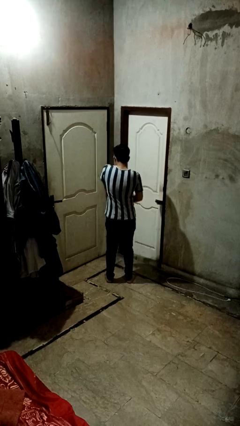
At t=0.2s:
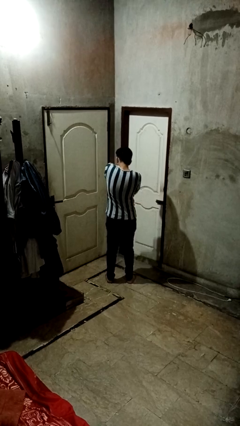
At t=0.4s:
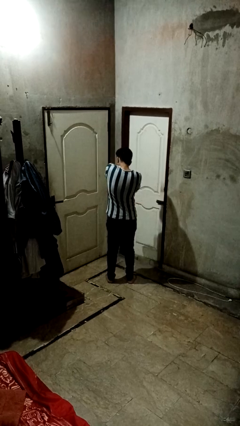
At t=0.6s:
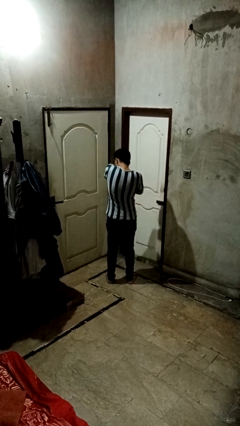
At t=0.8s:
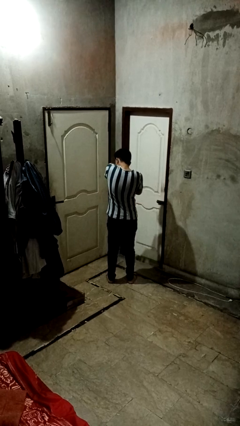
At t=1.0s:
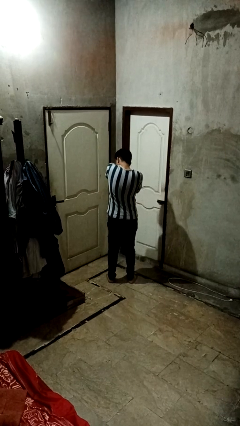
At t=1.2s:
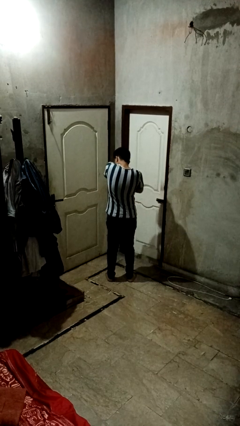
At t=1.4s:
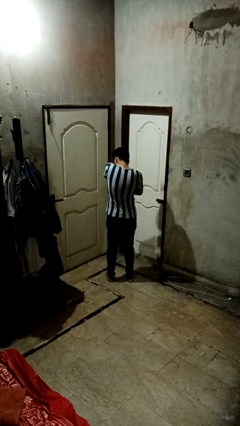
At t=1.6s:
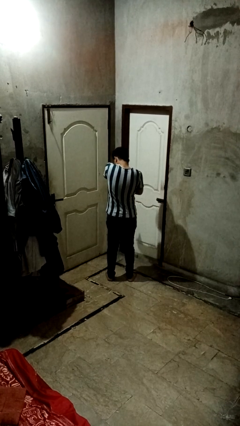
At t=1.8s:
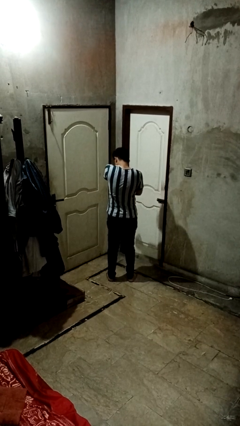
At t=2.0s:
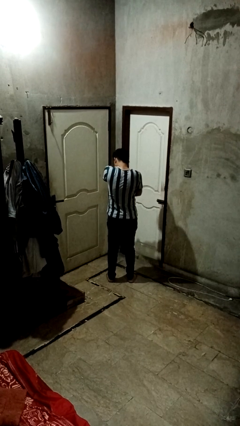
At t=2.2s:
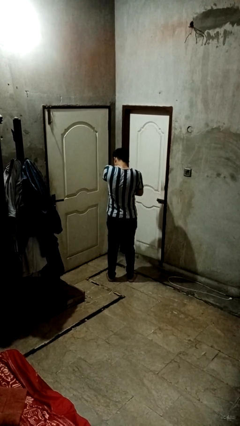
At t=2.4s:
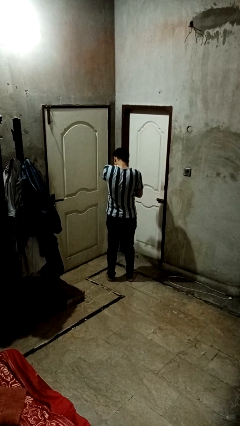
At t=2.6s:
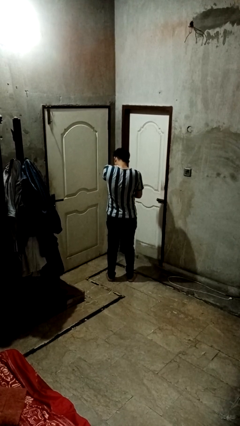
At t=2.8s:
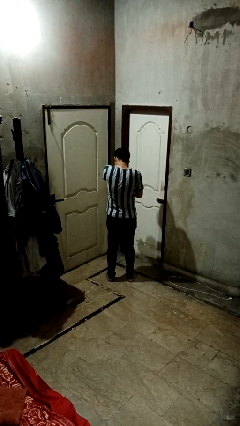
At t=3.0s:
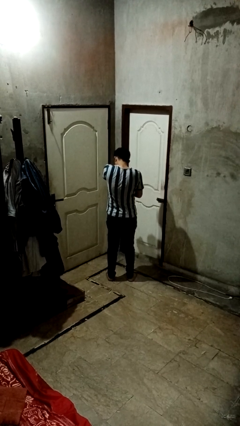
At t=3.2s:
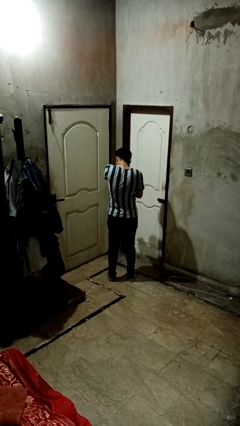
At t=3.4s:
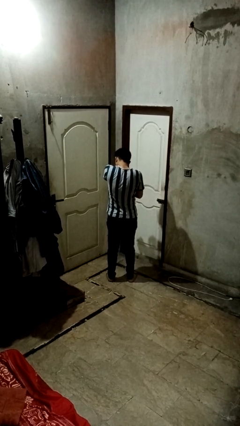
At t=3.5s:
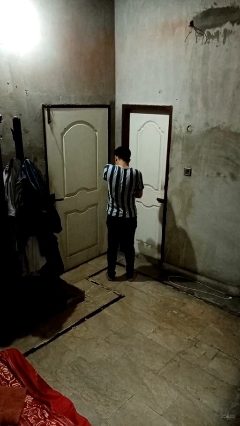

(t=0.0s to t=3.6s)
person swats bug

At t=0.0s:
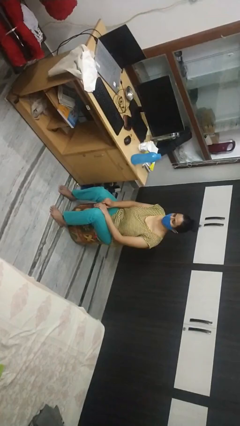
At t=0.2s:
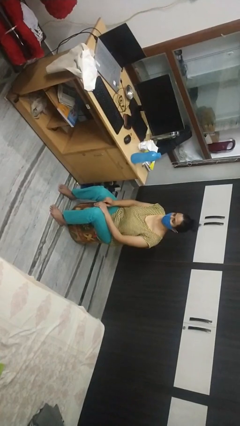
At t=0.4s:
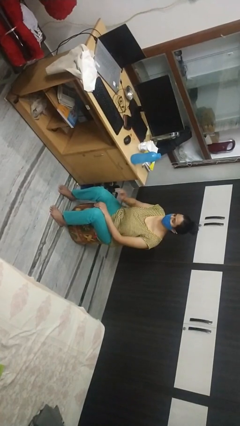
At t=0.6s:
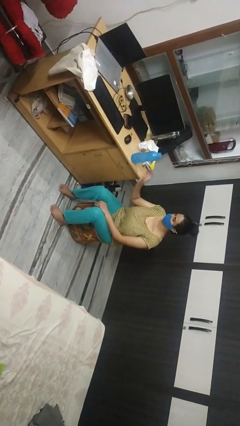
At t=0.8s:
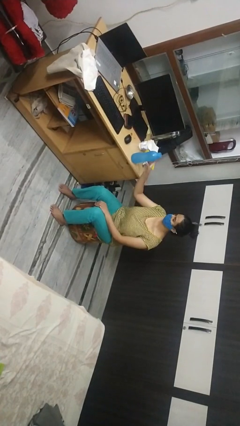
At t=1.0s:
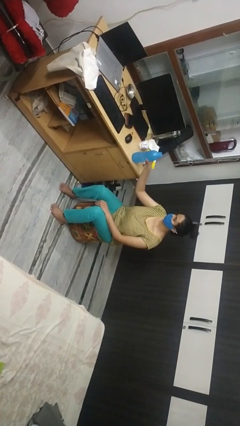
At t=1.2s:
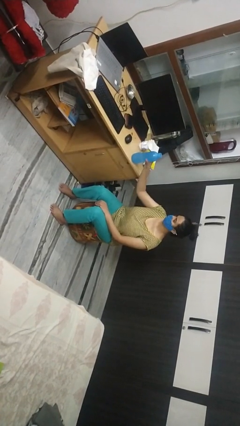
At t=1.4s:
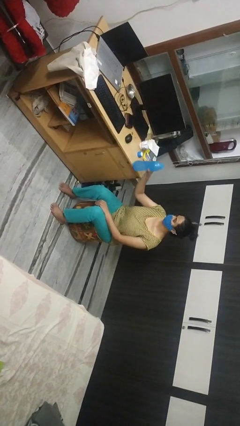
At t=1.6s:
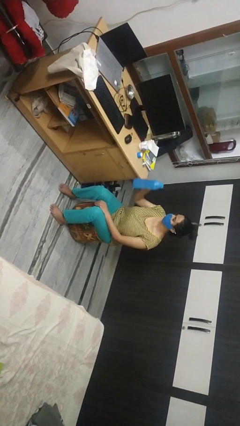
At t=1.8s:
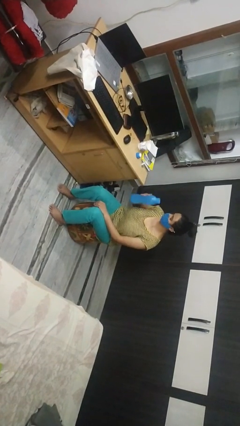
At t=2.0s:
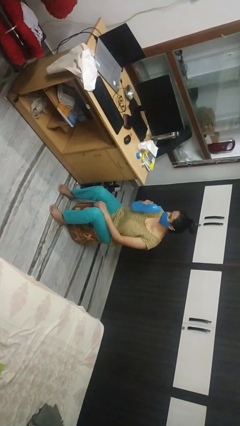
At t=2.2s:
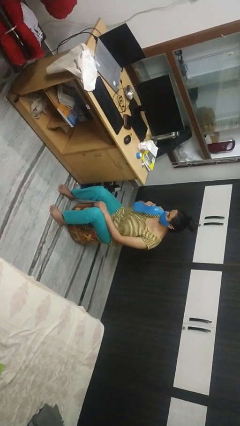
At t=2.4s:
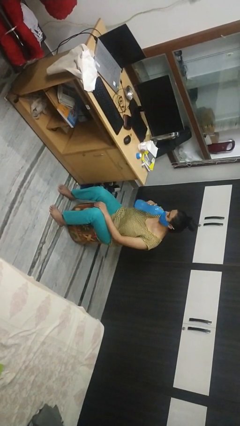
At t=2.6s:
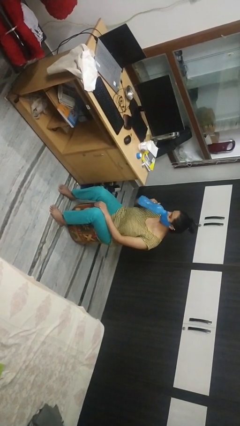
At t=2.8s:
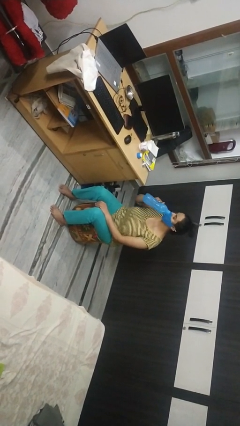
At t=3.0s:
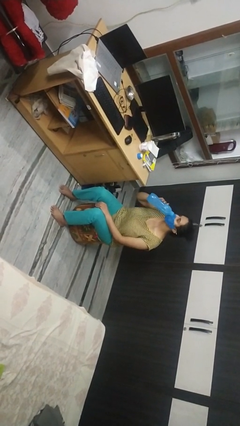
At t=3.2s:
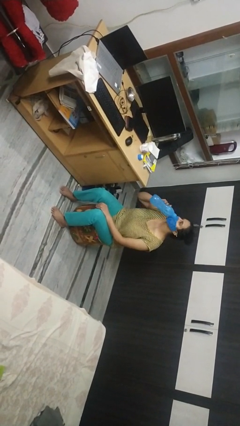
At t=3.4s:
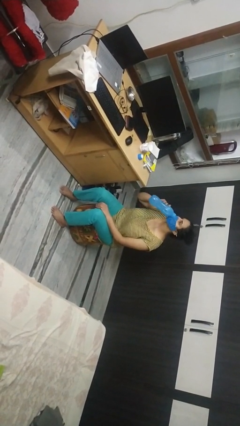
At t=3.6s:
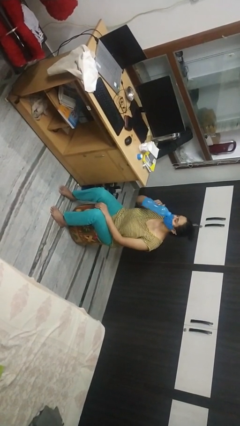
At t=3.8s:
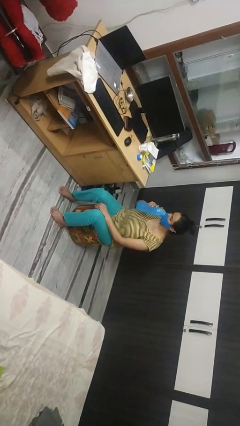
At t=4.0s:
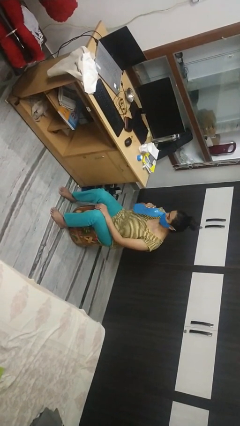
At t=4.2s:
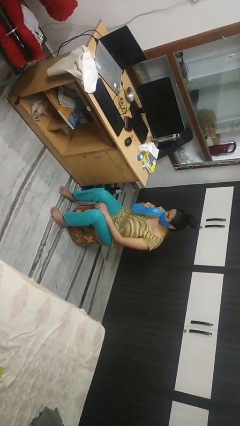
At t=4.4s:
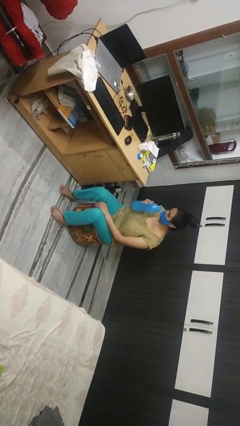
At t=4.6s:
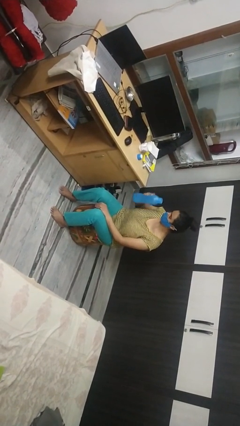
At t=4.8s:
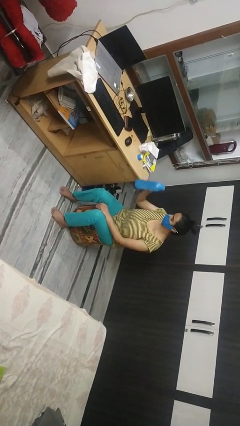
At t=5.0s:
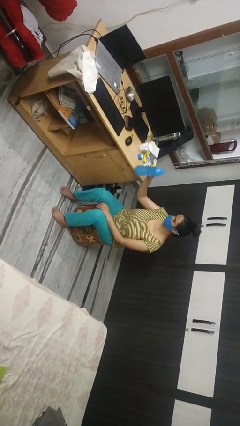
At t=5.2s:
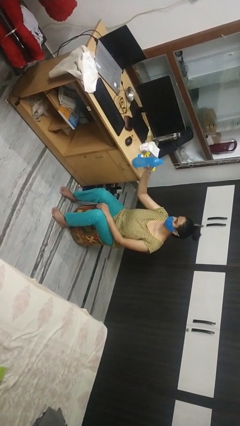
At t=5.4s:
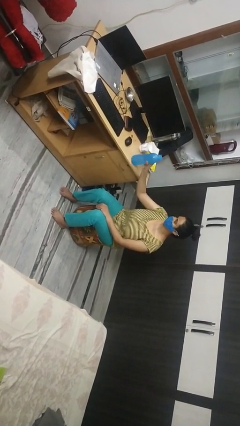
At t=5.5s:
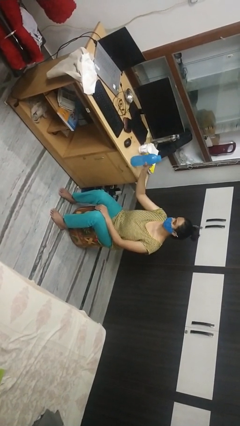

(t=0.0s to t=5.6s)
person drinks from bottle

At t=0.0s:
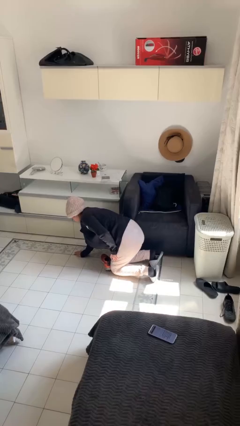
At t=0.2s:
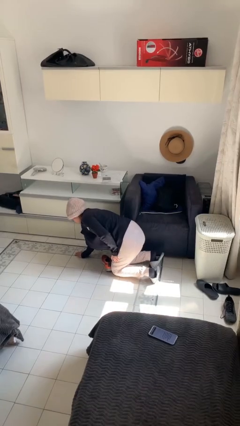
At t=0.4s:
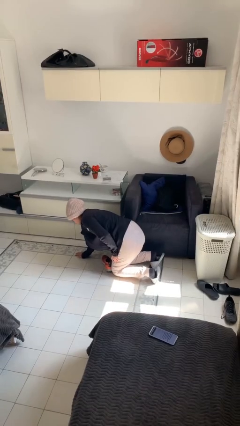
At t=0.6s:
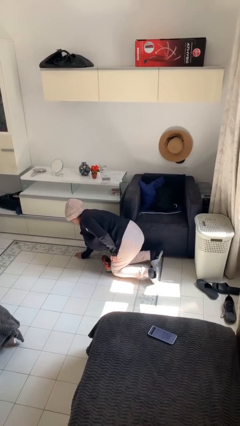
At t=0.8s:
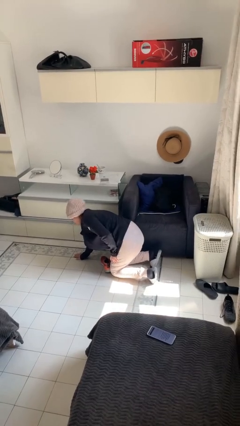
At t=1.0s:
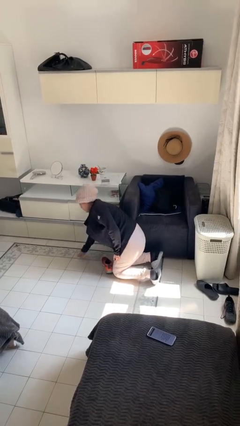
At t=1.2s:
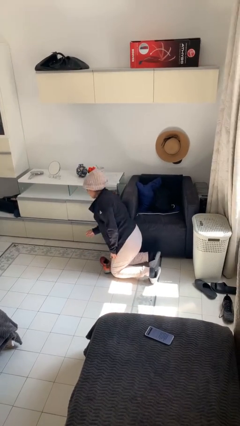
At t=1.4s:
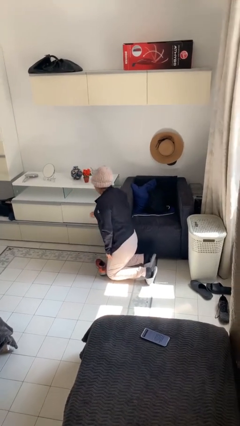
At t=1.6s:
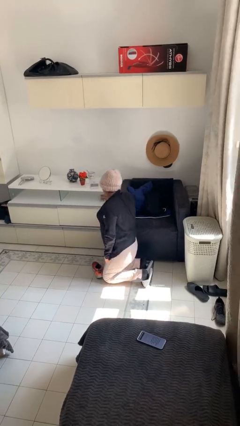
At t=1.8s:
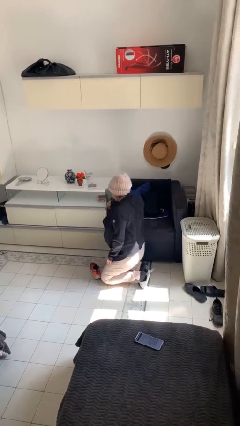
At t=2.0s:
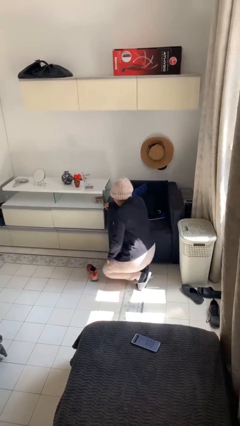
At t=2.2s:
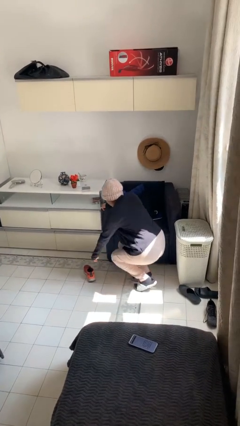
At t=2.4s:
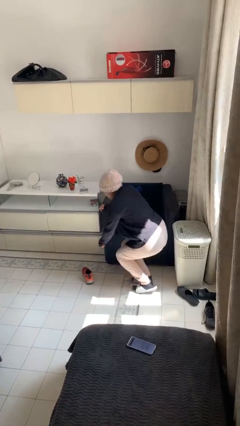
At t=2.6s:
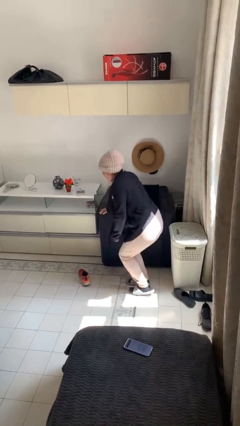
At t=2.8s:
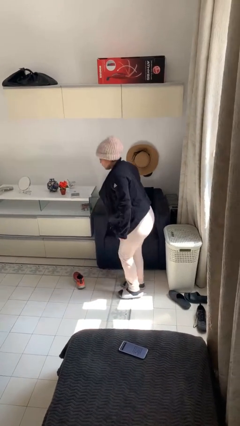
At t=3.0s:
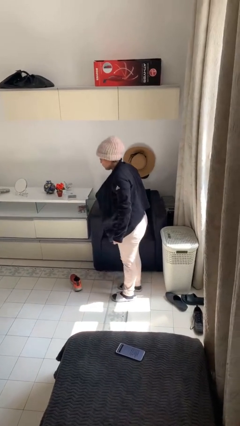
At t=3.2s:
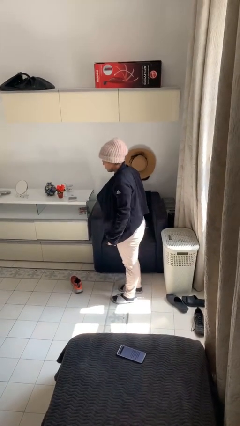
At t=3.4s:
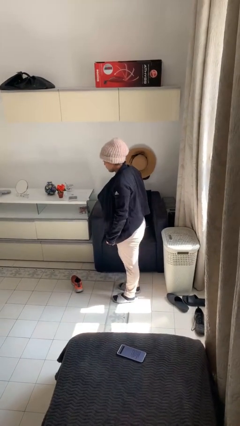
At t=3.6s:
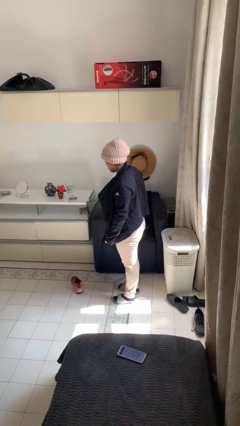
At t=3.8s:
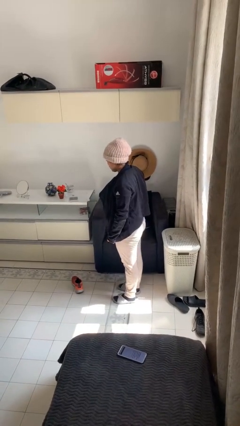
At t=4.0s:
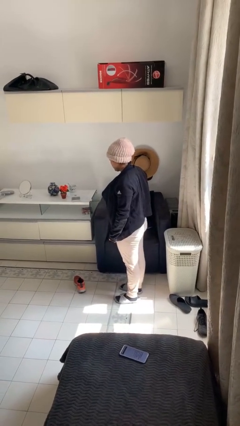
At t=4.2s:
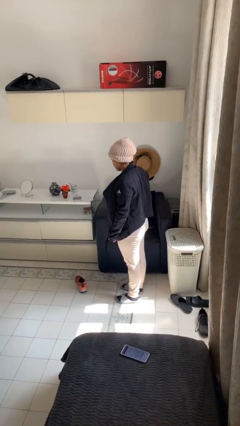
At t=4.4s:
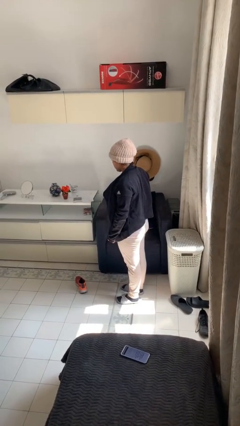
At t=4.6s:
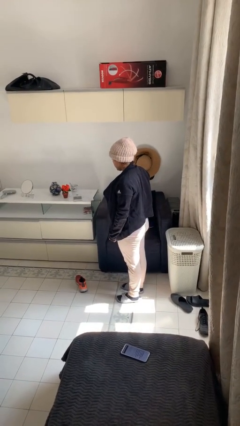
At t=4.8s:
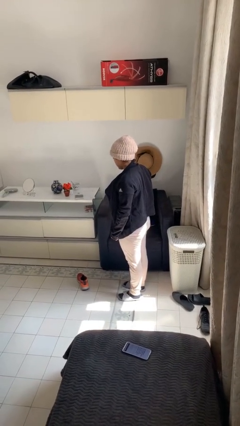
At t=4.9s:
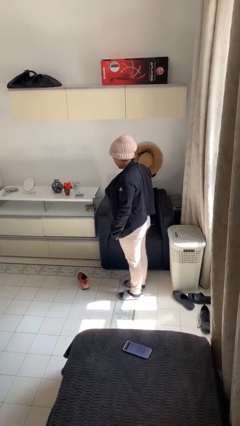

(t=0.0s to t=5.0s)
person stands up from floor

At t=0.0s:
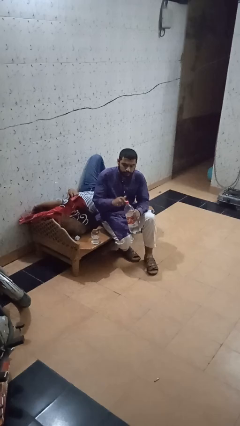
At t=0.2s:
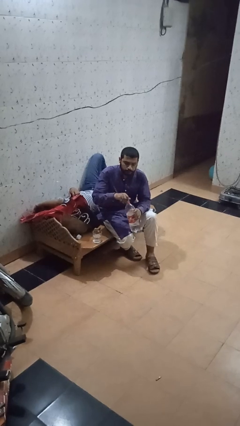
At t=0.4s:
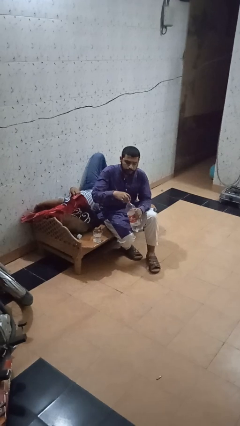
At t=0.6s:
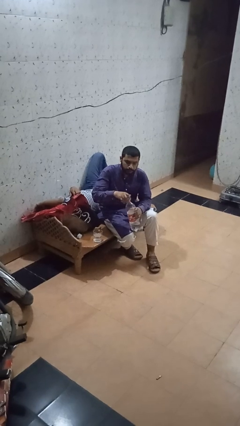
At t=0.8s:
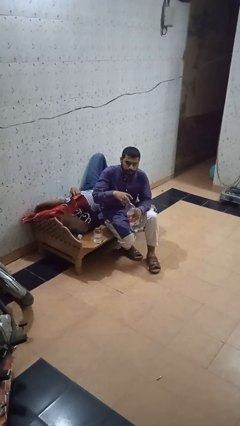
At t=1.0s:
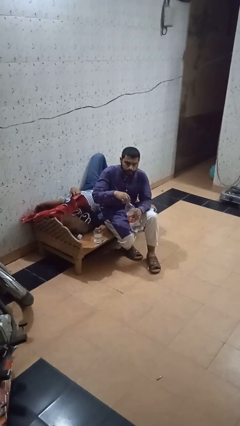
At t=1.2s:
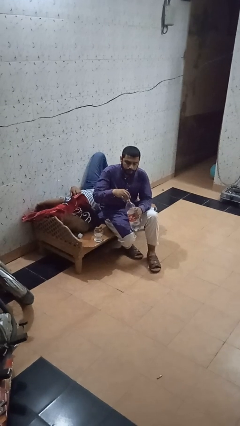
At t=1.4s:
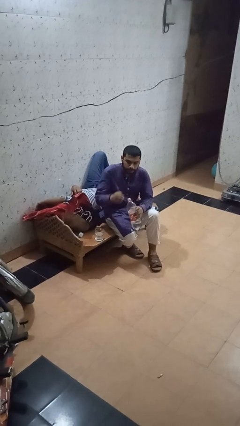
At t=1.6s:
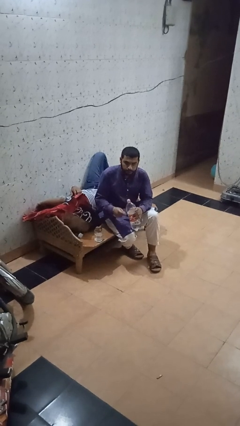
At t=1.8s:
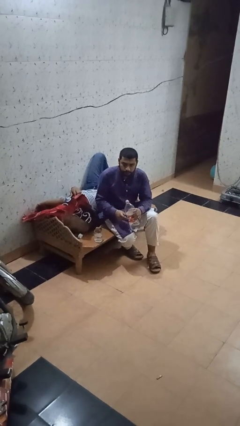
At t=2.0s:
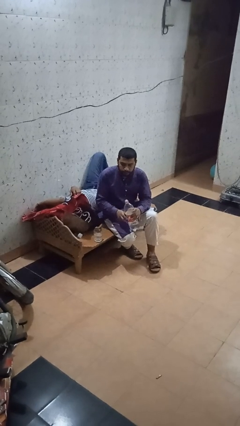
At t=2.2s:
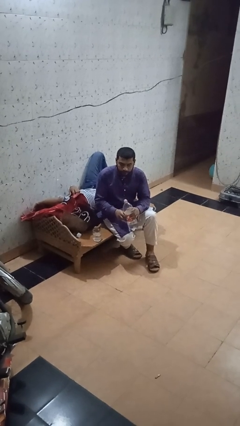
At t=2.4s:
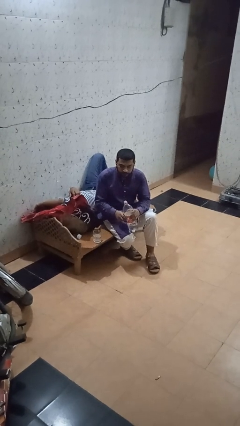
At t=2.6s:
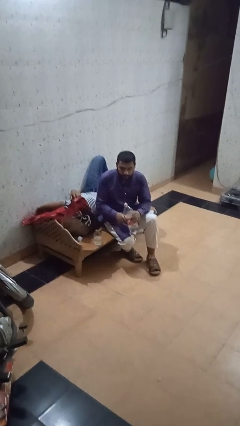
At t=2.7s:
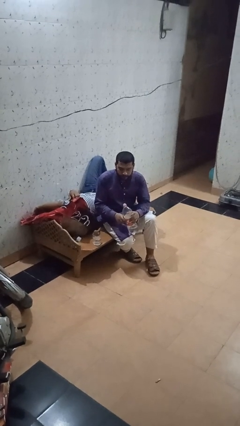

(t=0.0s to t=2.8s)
person unscrews lid from bottle

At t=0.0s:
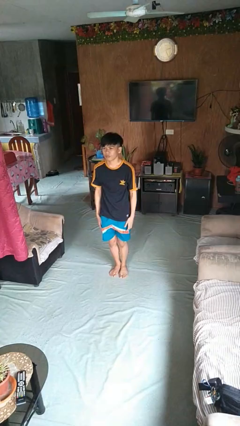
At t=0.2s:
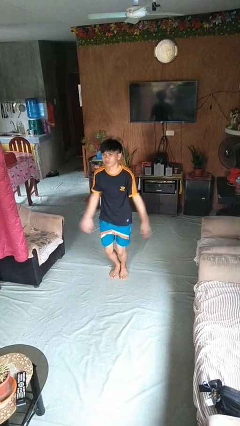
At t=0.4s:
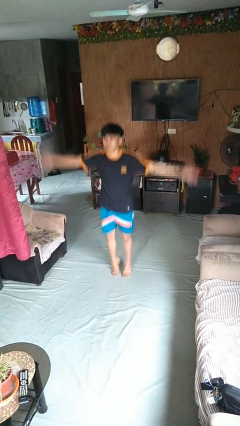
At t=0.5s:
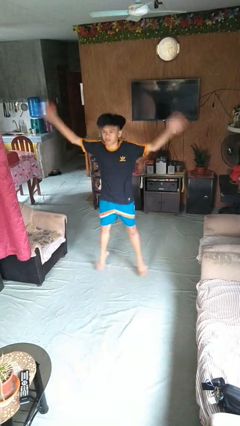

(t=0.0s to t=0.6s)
person exercises with jumping jacks
